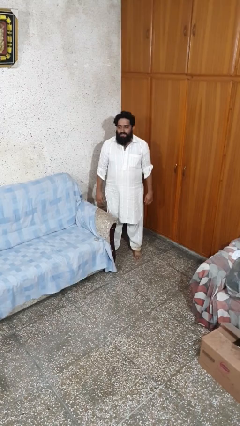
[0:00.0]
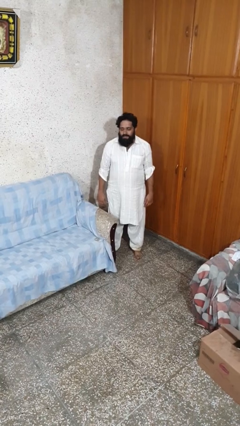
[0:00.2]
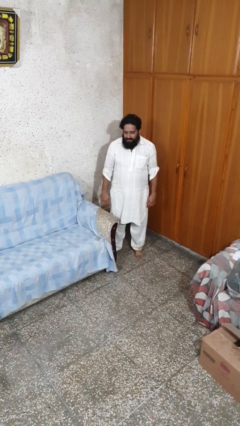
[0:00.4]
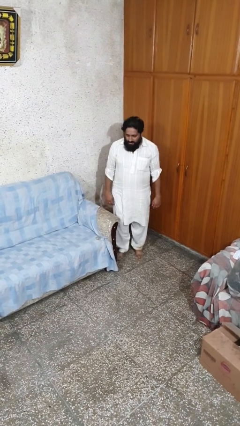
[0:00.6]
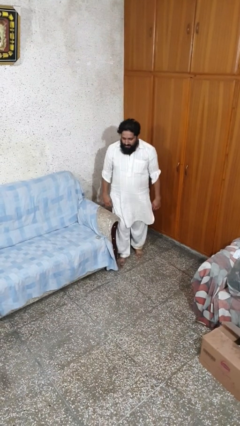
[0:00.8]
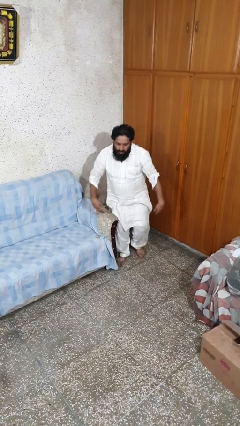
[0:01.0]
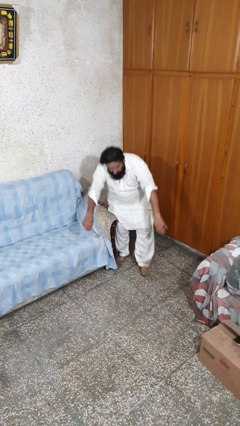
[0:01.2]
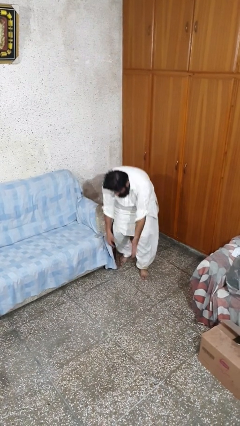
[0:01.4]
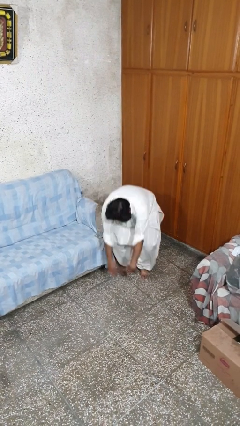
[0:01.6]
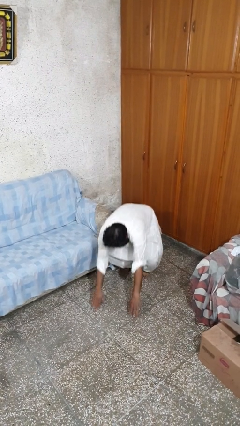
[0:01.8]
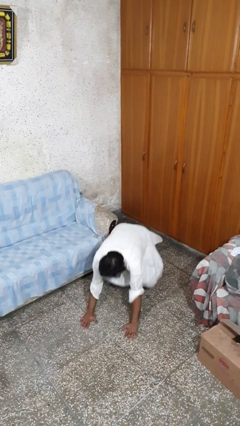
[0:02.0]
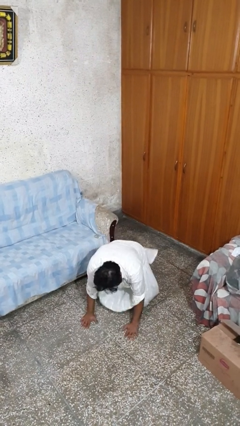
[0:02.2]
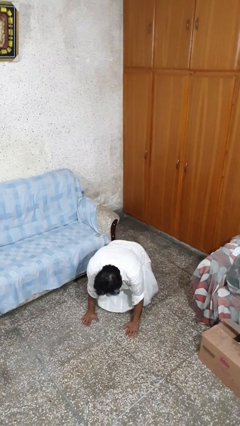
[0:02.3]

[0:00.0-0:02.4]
person trips on object on floor

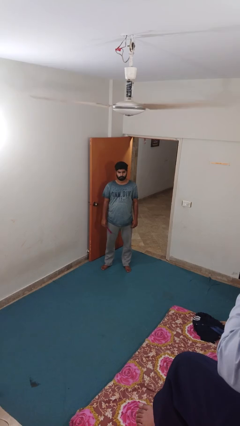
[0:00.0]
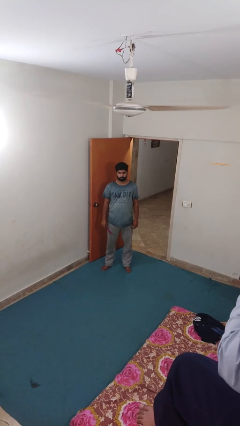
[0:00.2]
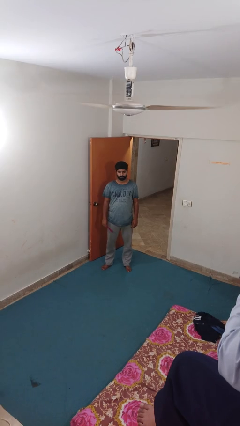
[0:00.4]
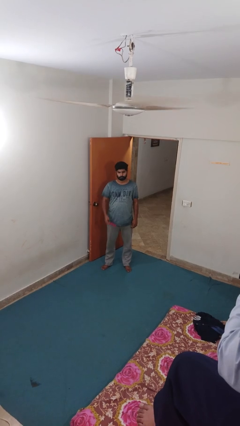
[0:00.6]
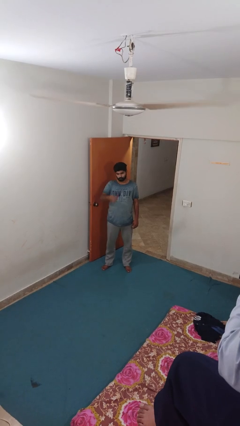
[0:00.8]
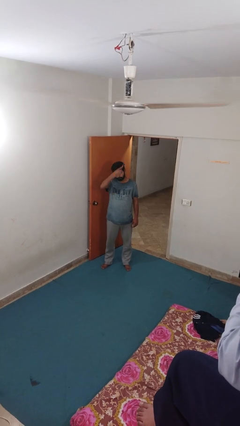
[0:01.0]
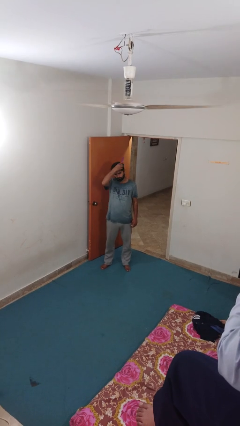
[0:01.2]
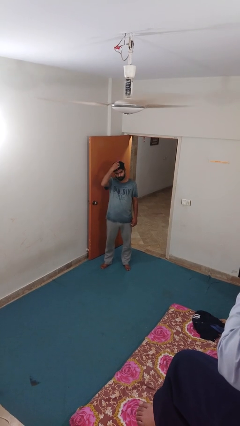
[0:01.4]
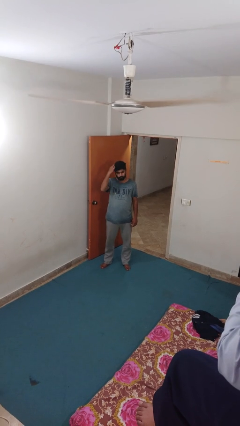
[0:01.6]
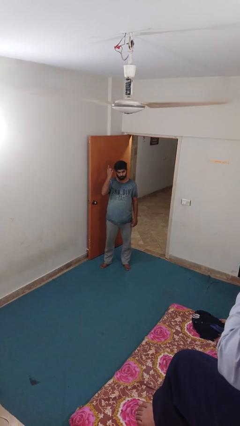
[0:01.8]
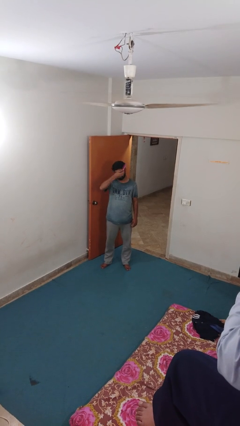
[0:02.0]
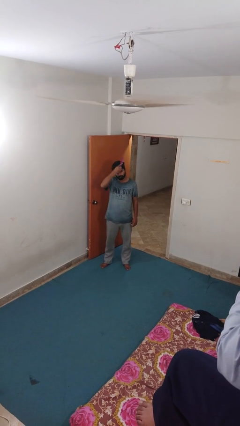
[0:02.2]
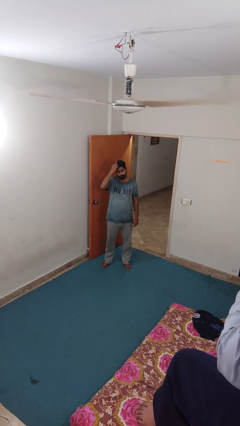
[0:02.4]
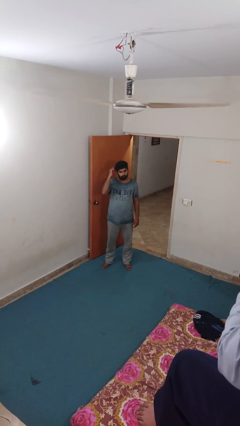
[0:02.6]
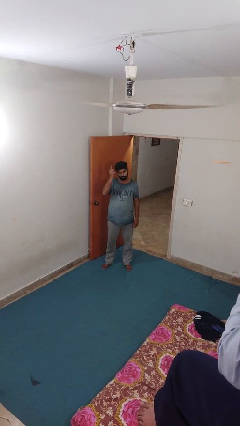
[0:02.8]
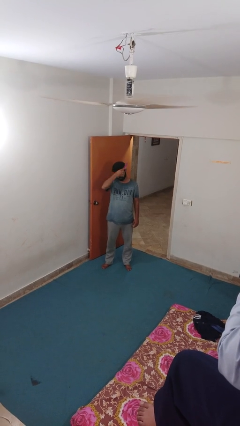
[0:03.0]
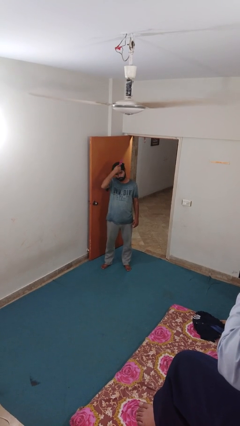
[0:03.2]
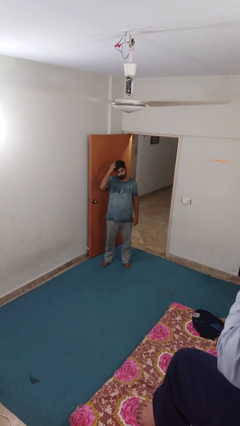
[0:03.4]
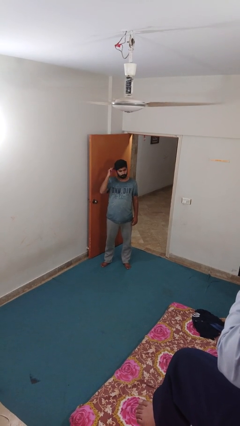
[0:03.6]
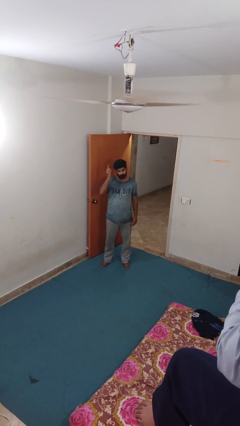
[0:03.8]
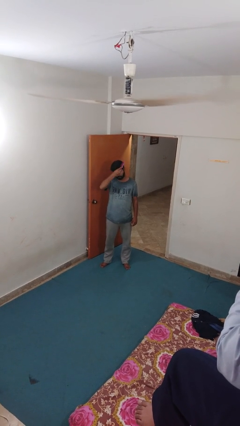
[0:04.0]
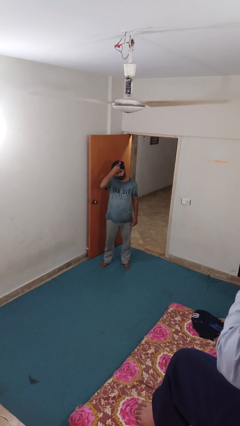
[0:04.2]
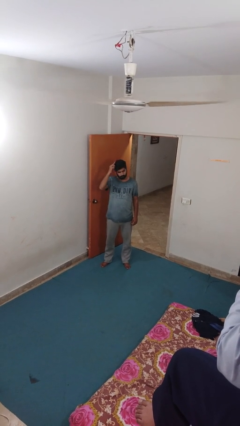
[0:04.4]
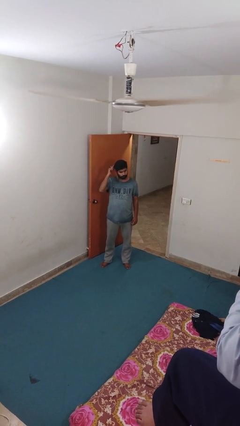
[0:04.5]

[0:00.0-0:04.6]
person brushes hair

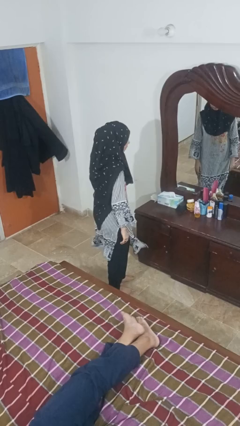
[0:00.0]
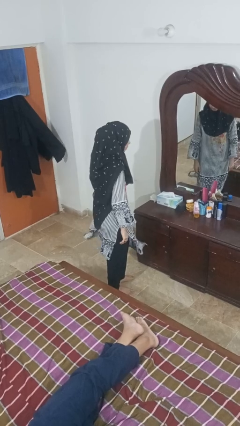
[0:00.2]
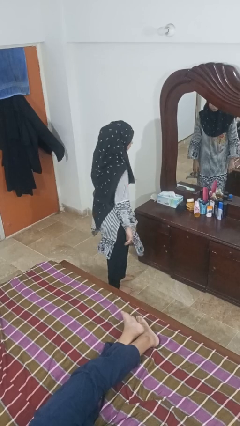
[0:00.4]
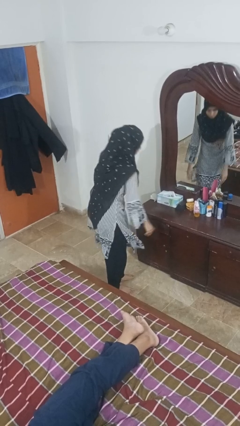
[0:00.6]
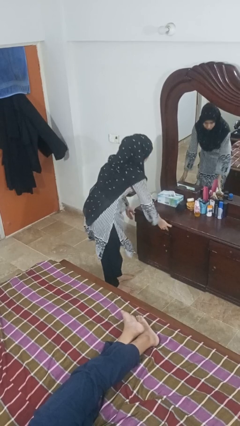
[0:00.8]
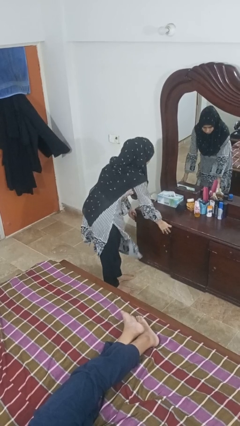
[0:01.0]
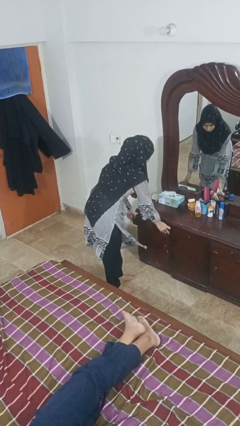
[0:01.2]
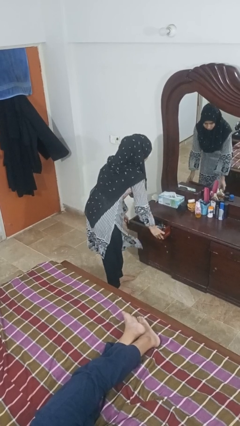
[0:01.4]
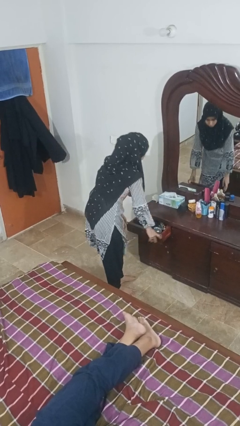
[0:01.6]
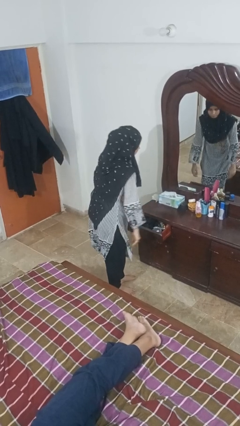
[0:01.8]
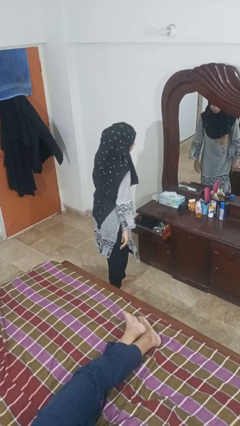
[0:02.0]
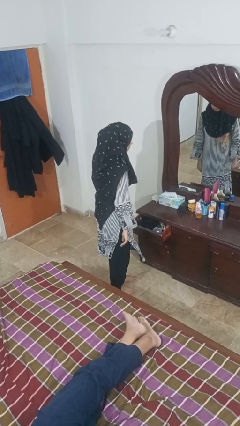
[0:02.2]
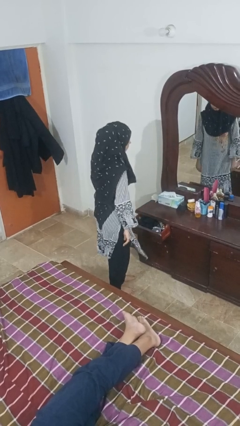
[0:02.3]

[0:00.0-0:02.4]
person opens dresser drawer

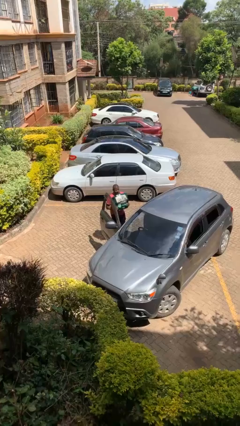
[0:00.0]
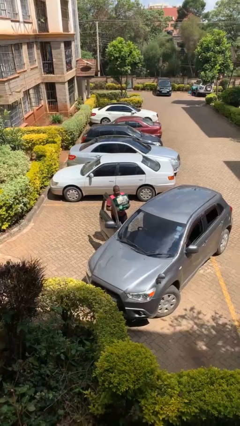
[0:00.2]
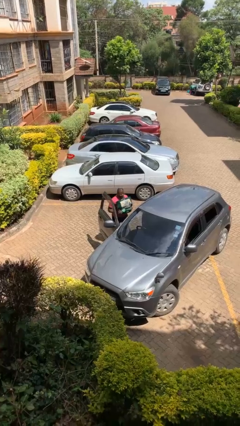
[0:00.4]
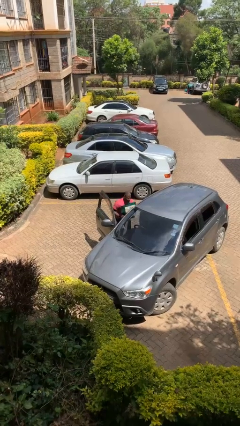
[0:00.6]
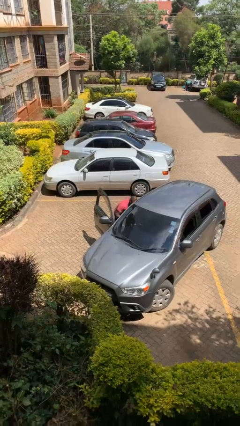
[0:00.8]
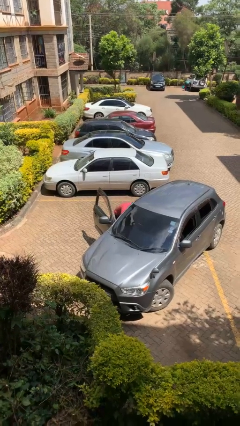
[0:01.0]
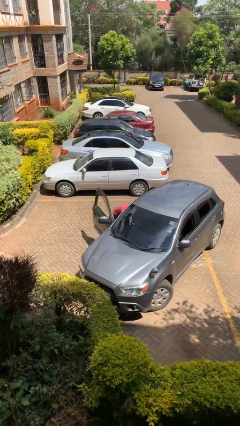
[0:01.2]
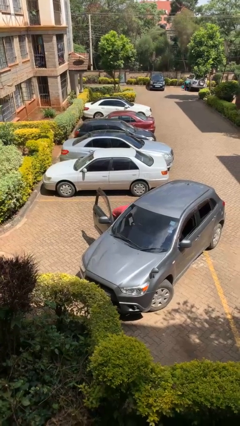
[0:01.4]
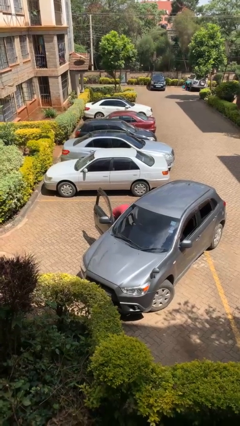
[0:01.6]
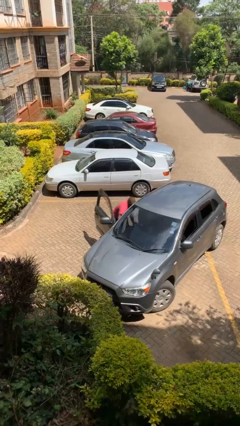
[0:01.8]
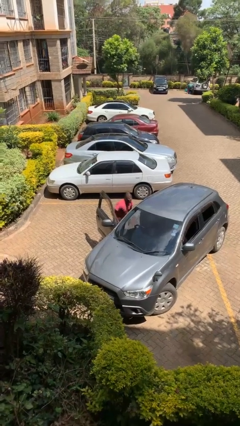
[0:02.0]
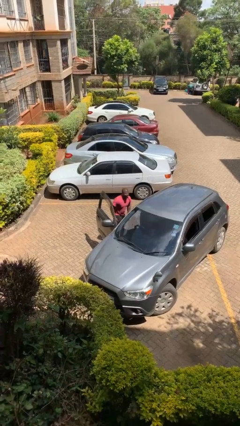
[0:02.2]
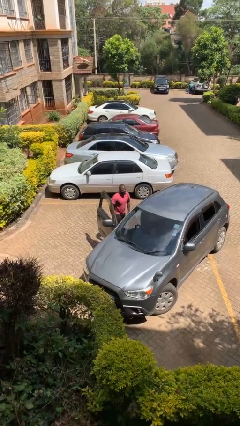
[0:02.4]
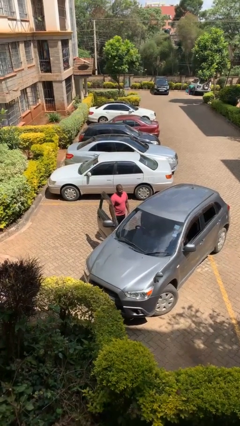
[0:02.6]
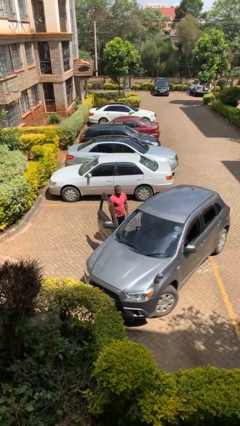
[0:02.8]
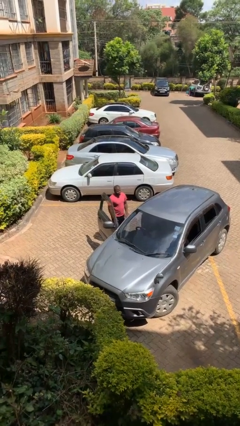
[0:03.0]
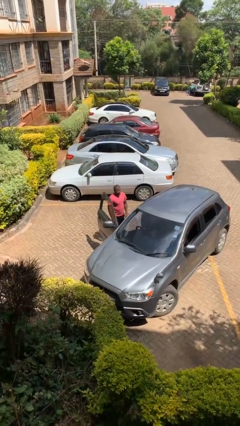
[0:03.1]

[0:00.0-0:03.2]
person loads car

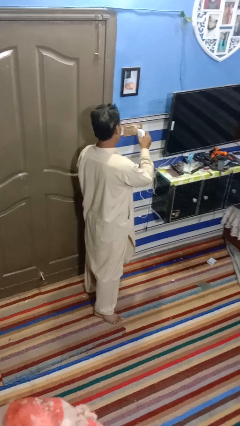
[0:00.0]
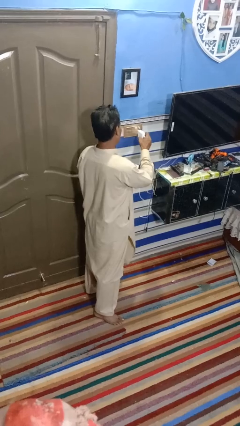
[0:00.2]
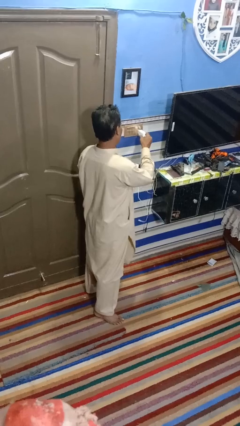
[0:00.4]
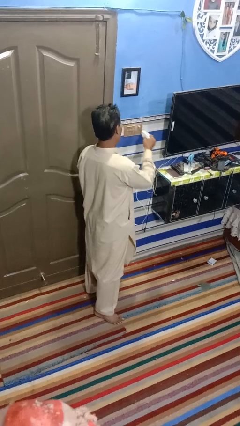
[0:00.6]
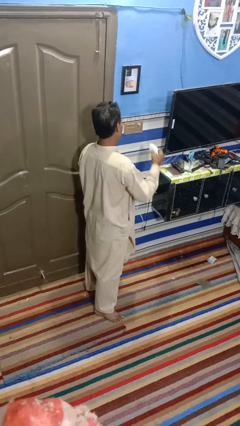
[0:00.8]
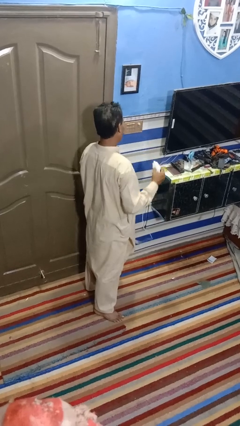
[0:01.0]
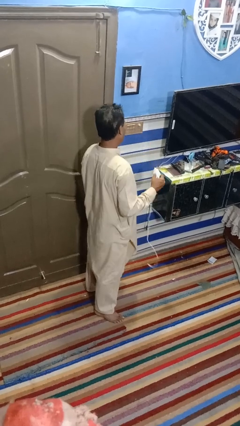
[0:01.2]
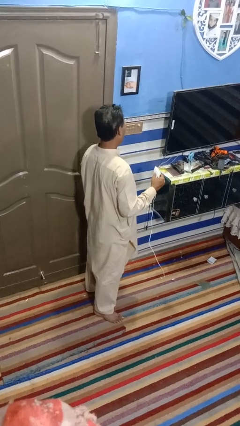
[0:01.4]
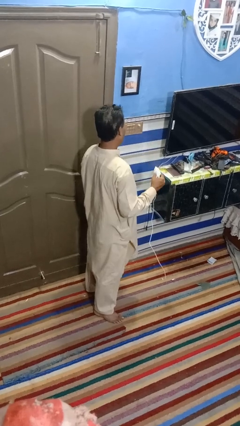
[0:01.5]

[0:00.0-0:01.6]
person unplugs from electrical socket

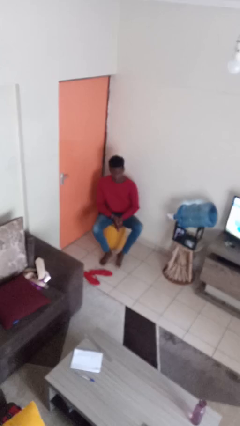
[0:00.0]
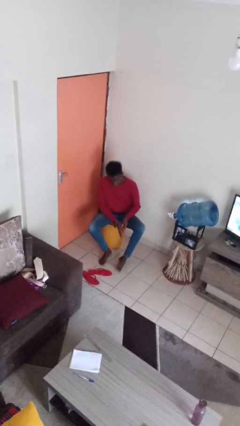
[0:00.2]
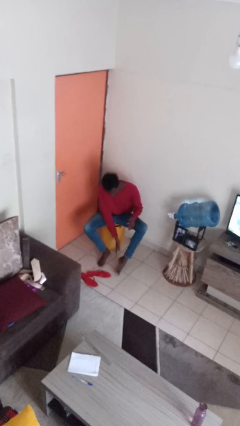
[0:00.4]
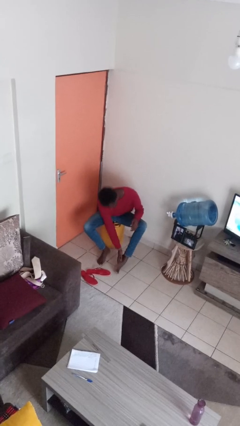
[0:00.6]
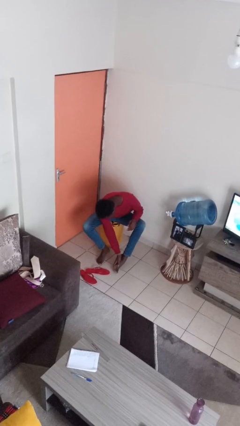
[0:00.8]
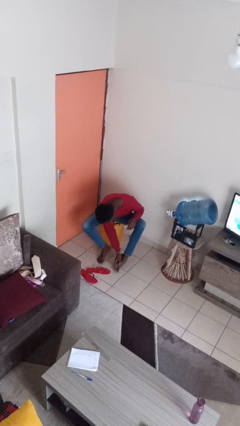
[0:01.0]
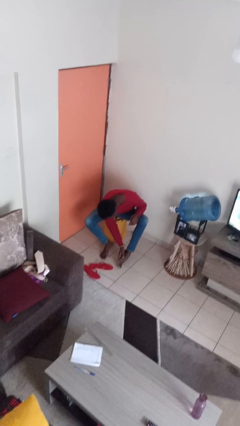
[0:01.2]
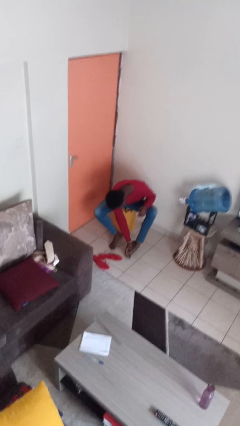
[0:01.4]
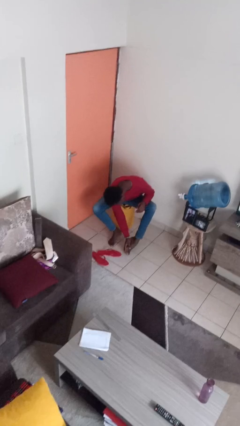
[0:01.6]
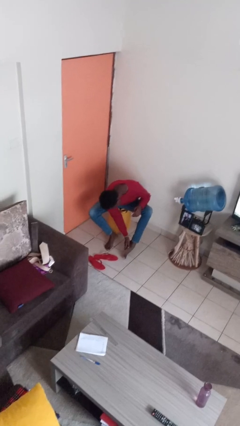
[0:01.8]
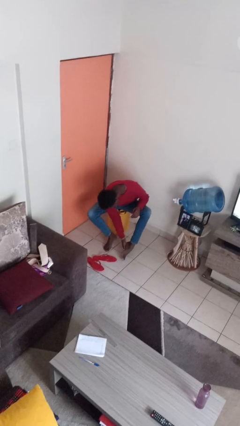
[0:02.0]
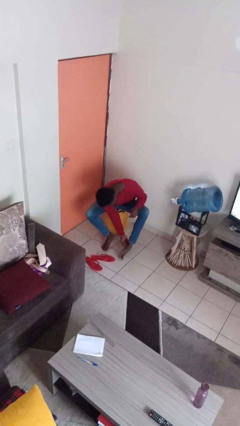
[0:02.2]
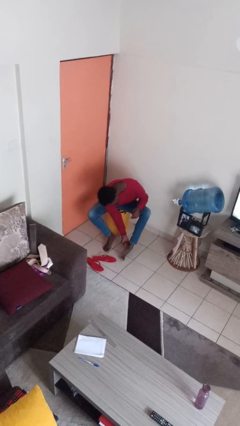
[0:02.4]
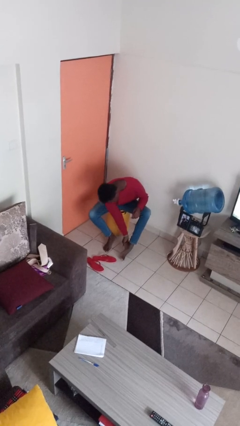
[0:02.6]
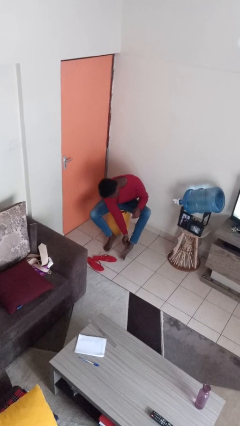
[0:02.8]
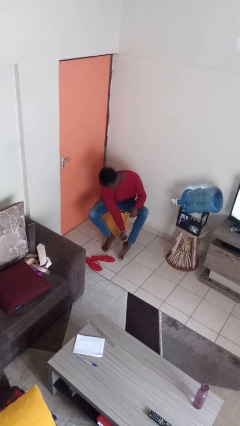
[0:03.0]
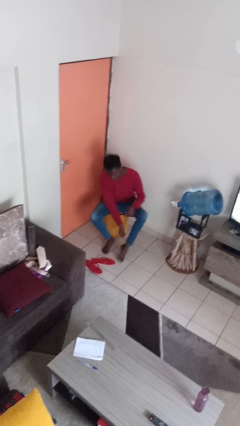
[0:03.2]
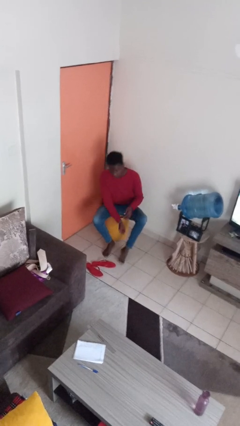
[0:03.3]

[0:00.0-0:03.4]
person rubs foot
